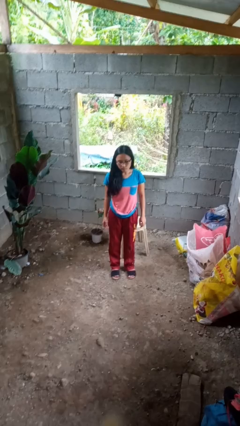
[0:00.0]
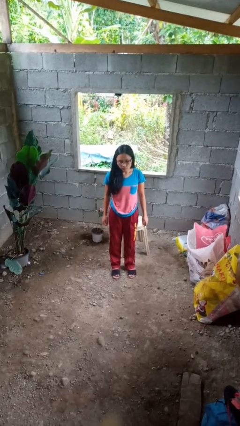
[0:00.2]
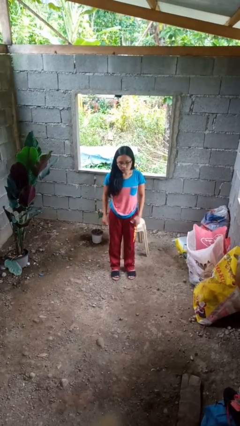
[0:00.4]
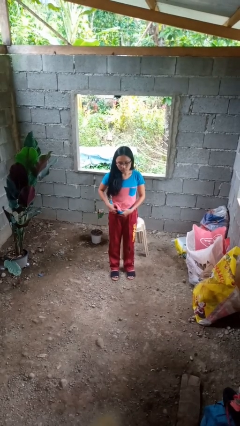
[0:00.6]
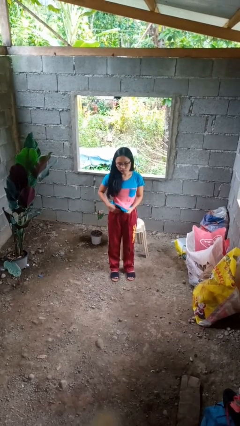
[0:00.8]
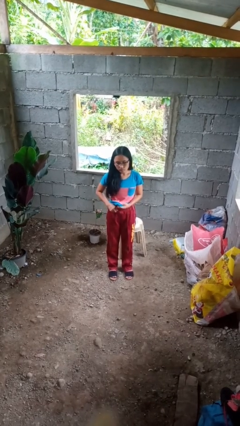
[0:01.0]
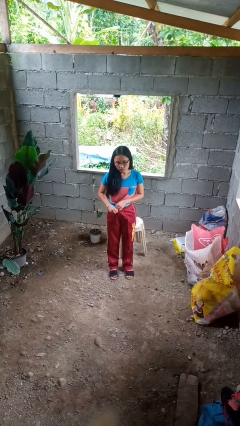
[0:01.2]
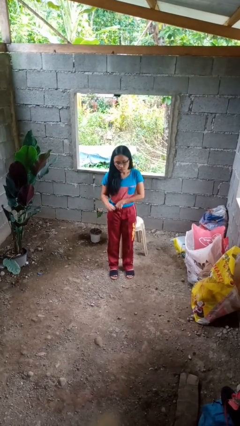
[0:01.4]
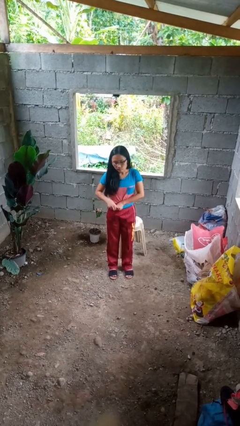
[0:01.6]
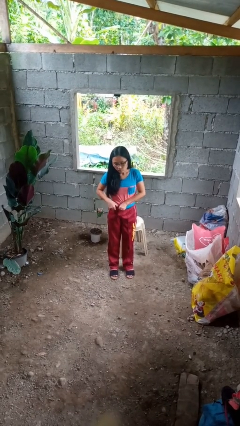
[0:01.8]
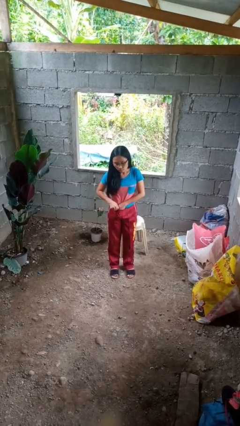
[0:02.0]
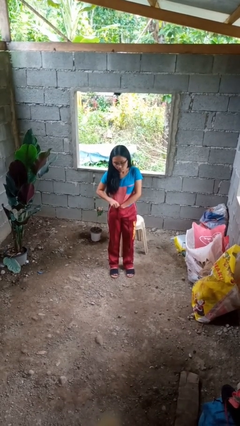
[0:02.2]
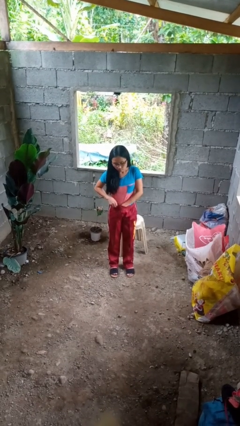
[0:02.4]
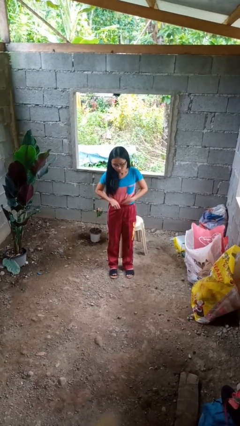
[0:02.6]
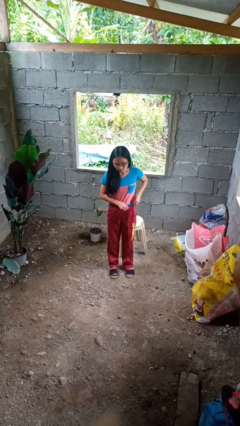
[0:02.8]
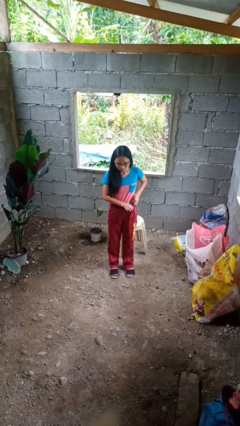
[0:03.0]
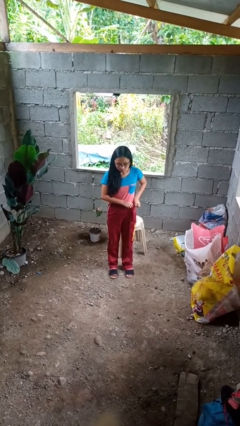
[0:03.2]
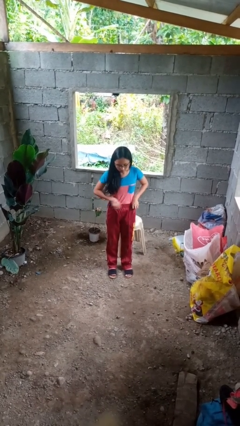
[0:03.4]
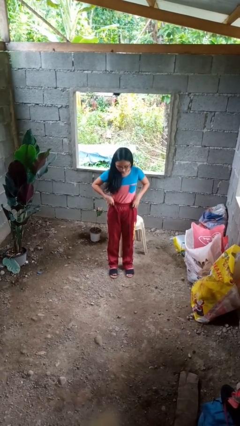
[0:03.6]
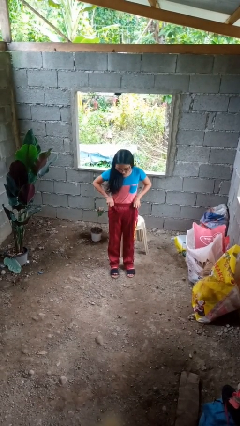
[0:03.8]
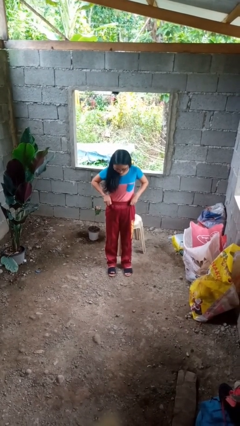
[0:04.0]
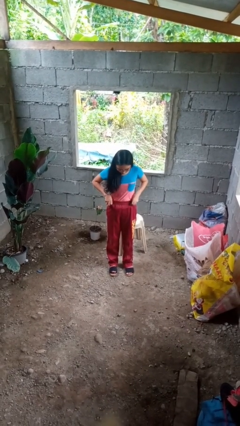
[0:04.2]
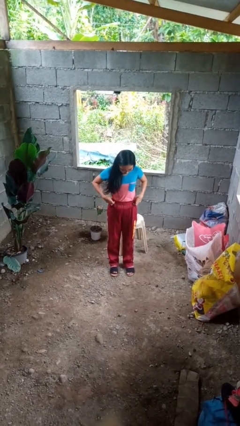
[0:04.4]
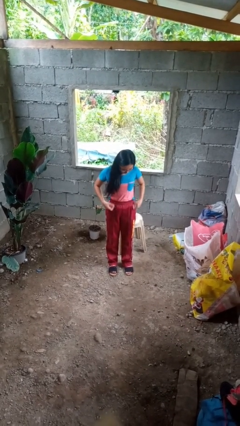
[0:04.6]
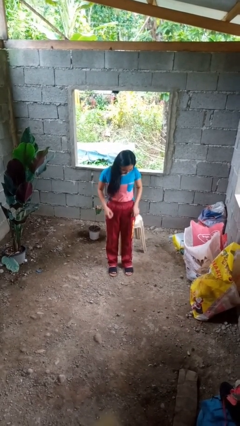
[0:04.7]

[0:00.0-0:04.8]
person tucks in shirt

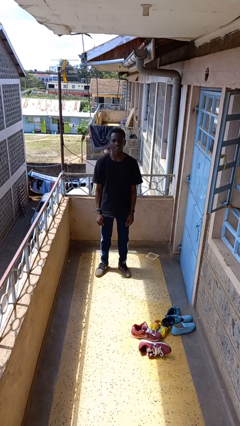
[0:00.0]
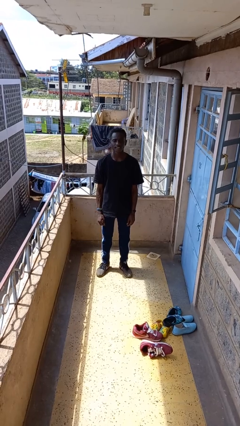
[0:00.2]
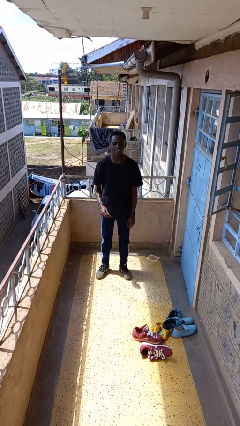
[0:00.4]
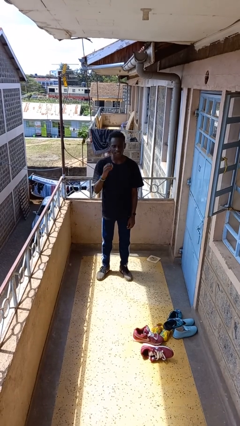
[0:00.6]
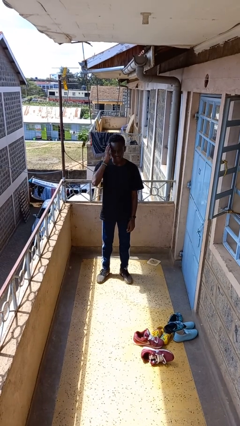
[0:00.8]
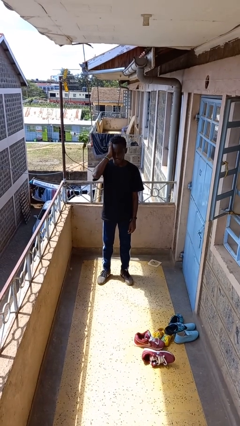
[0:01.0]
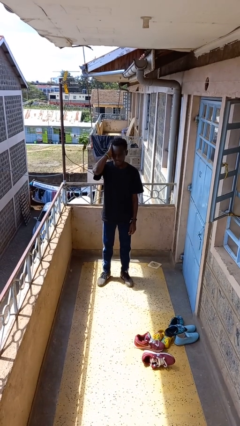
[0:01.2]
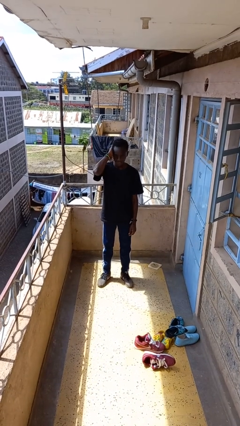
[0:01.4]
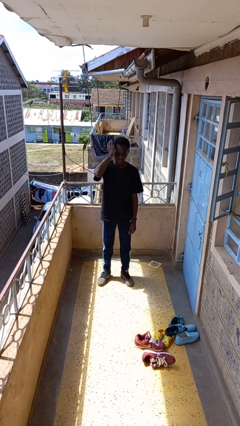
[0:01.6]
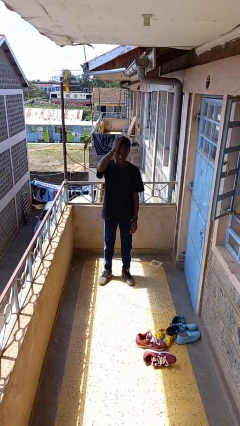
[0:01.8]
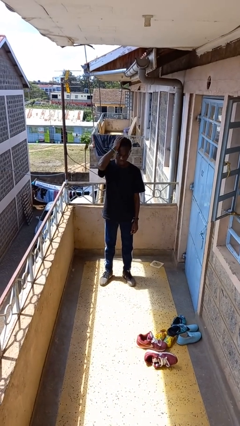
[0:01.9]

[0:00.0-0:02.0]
person strokes hair

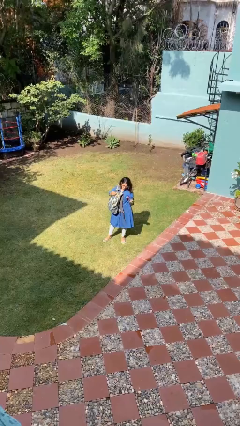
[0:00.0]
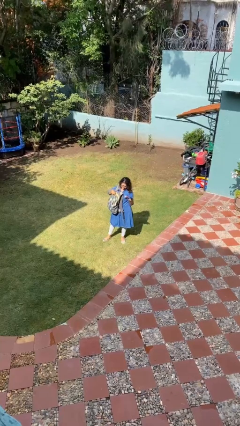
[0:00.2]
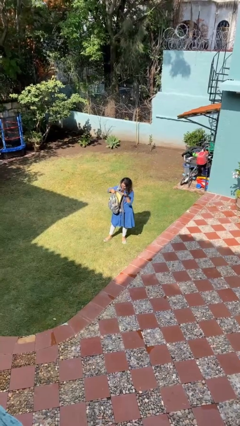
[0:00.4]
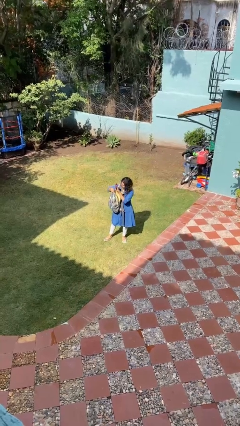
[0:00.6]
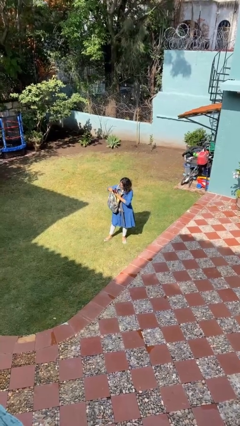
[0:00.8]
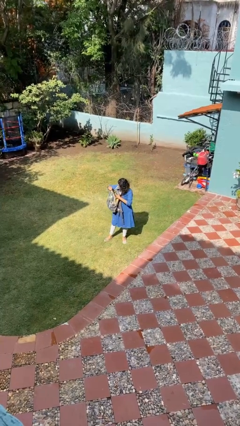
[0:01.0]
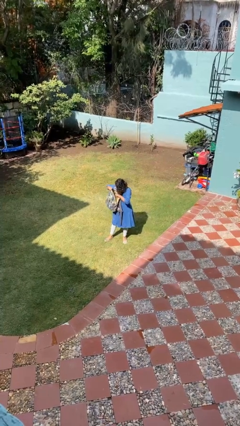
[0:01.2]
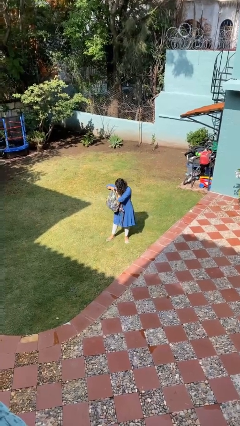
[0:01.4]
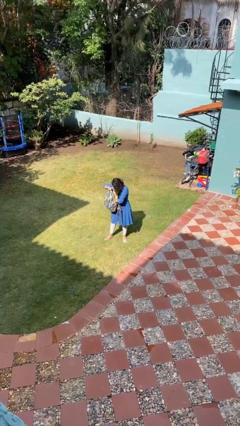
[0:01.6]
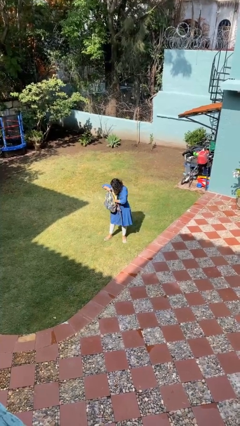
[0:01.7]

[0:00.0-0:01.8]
person puts object into backpack

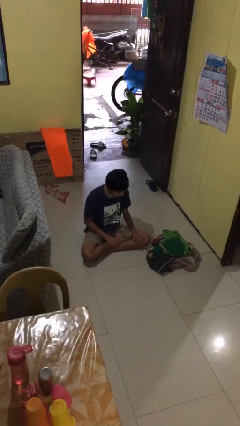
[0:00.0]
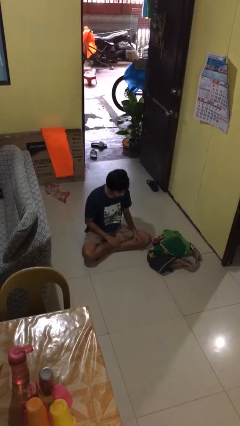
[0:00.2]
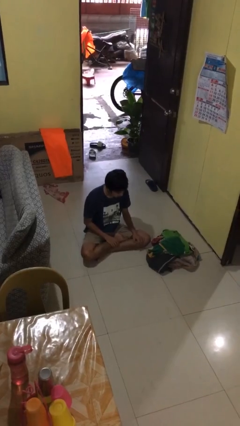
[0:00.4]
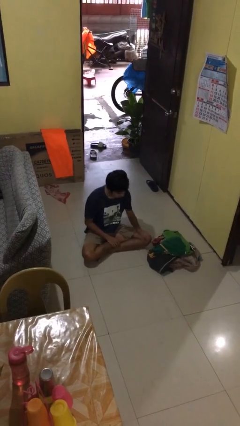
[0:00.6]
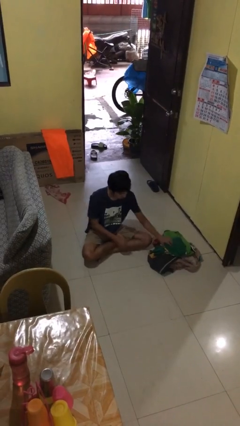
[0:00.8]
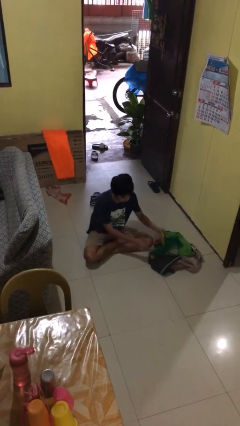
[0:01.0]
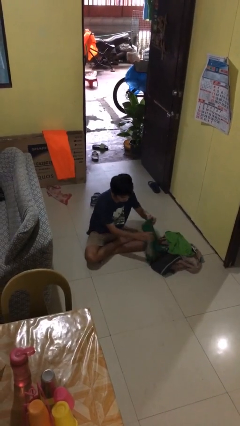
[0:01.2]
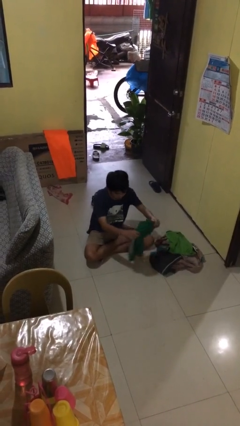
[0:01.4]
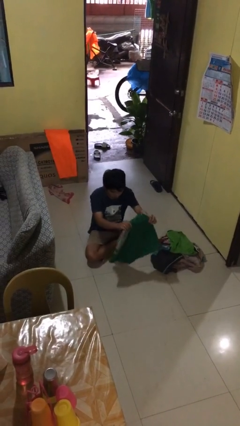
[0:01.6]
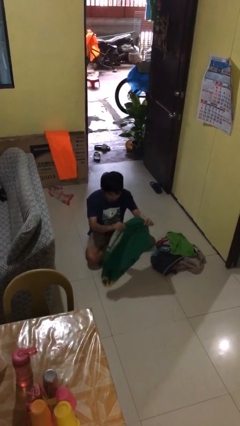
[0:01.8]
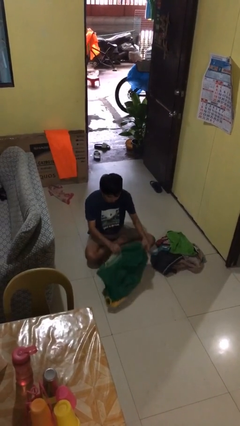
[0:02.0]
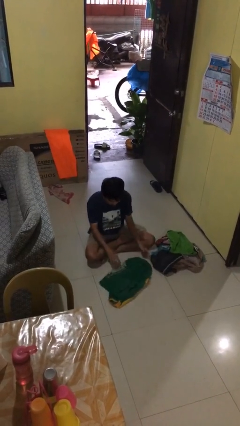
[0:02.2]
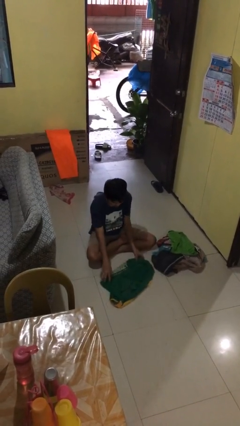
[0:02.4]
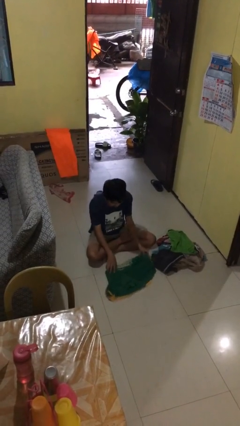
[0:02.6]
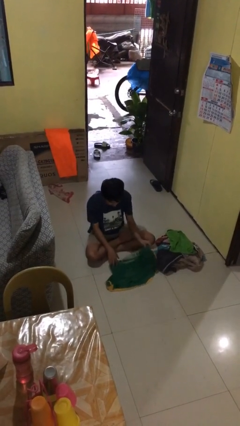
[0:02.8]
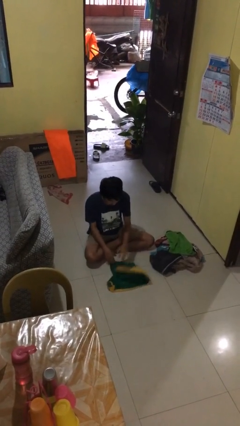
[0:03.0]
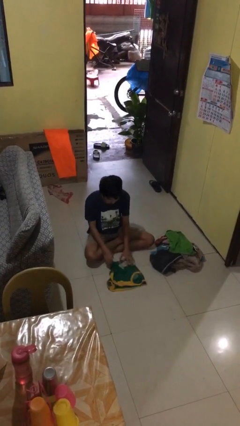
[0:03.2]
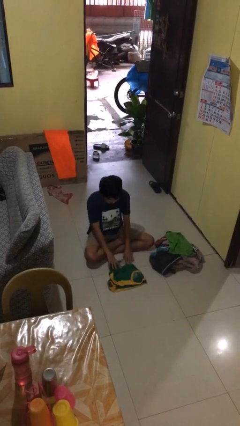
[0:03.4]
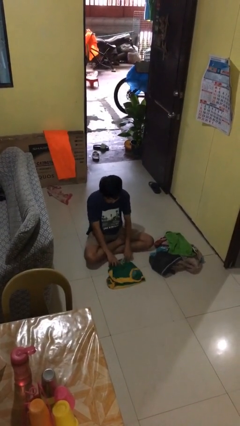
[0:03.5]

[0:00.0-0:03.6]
person folds shirt

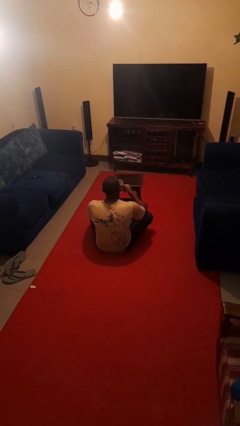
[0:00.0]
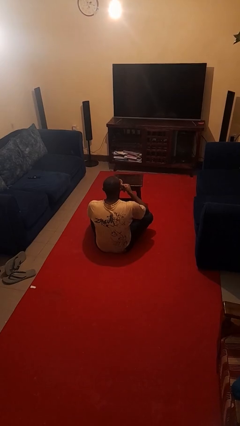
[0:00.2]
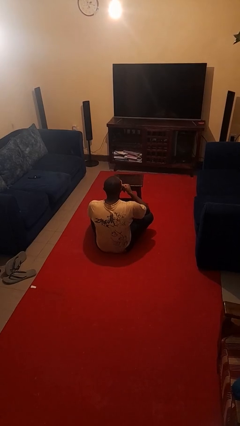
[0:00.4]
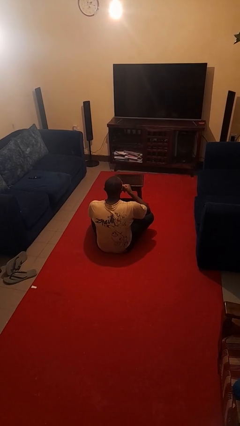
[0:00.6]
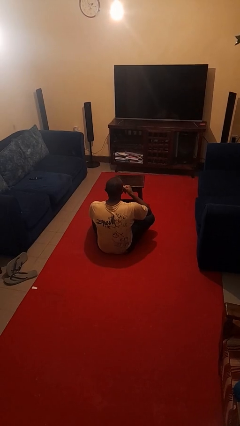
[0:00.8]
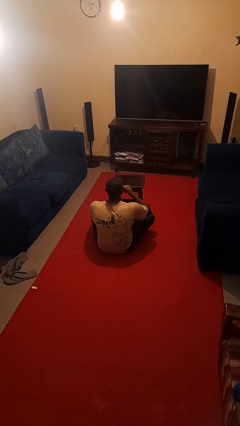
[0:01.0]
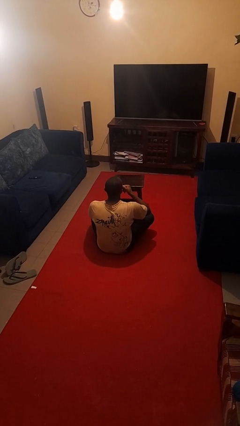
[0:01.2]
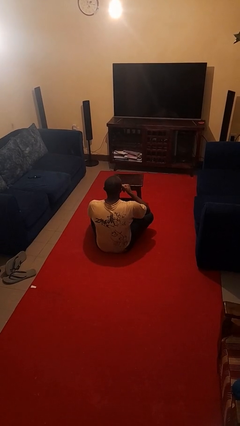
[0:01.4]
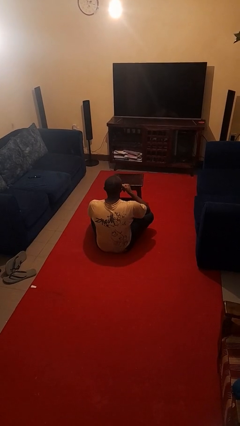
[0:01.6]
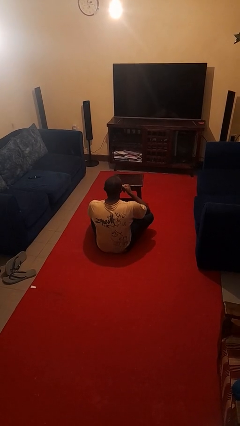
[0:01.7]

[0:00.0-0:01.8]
person drinks from mug

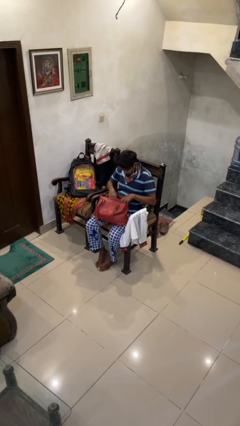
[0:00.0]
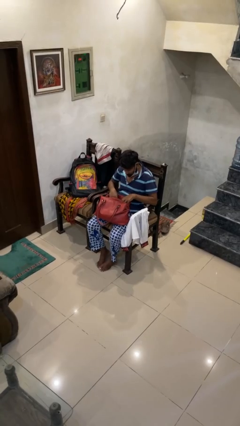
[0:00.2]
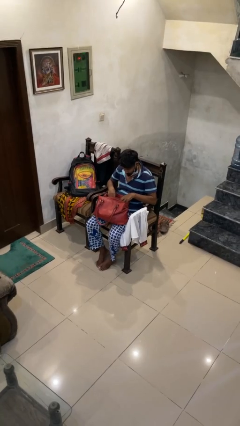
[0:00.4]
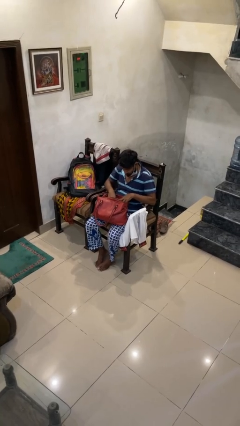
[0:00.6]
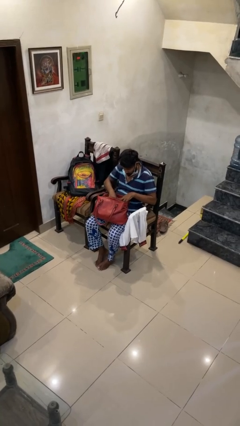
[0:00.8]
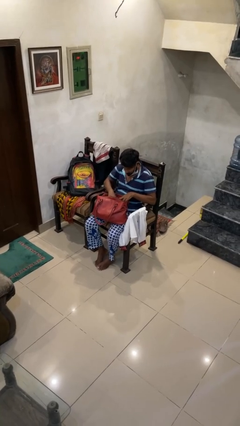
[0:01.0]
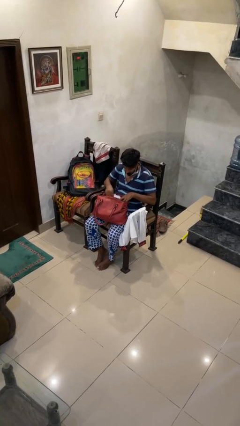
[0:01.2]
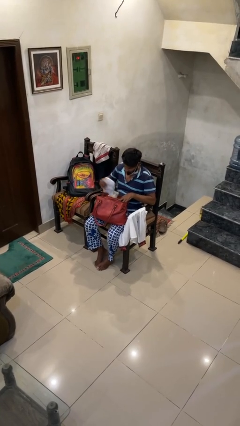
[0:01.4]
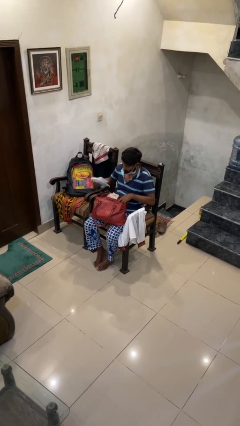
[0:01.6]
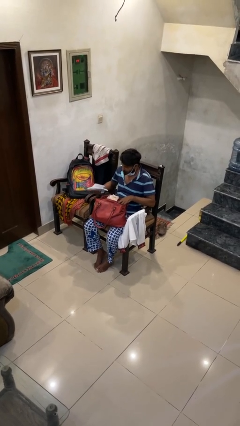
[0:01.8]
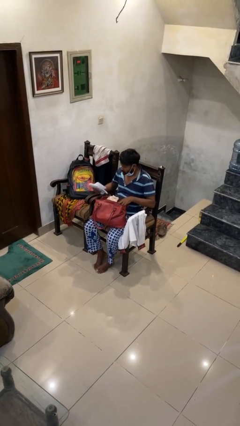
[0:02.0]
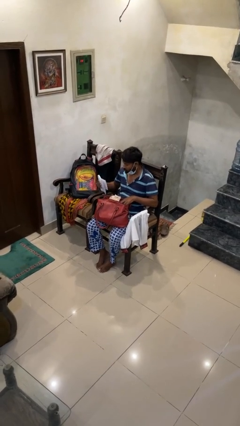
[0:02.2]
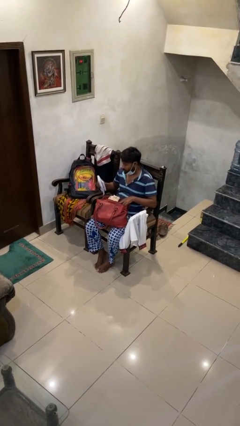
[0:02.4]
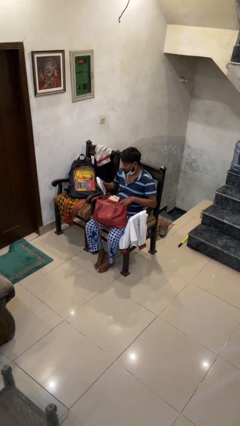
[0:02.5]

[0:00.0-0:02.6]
person takes object from purse

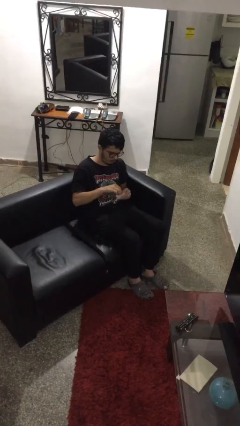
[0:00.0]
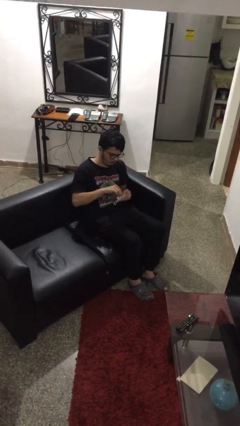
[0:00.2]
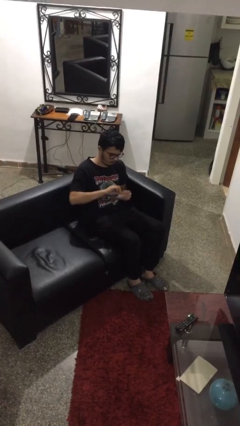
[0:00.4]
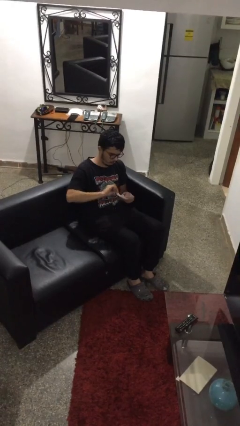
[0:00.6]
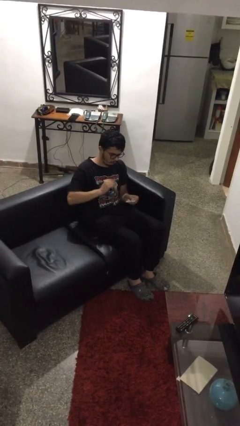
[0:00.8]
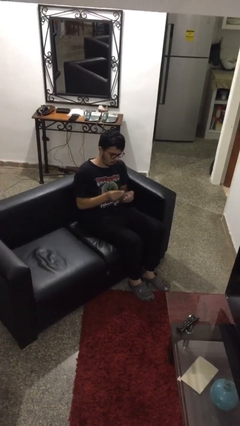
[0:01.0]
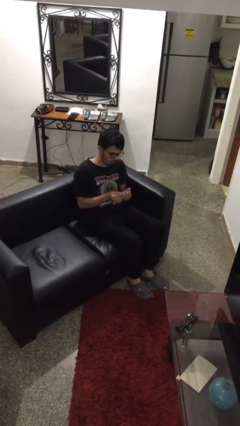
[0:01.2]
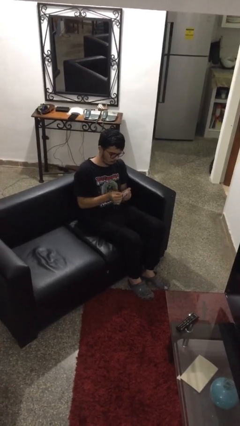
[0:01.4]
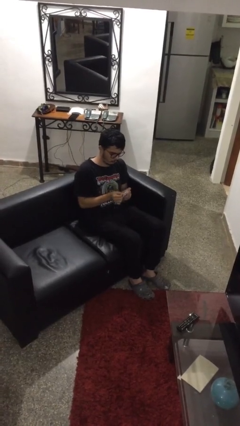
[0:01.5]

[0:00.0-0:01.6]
person tears paper
